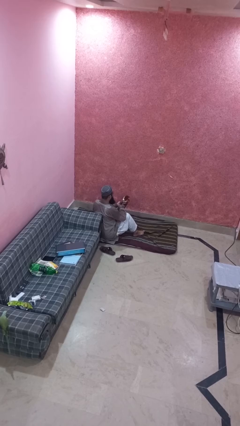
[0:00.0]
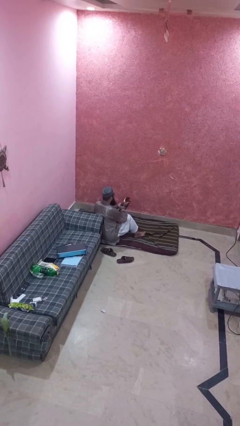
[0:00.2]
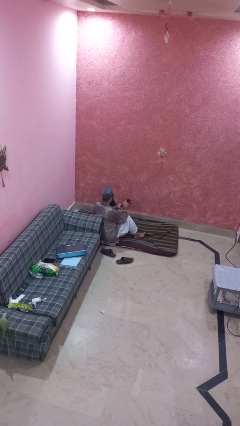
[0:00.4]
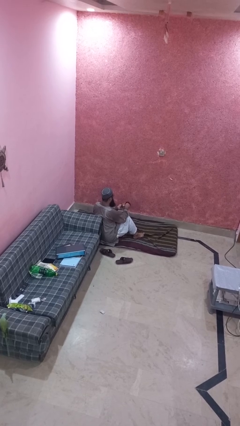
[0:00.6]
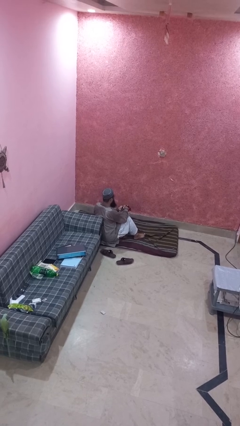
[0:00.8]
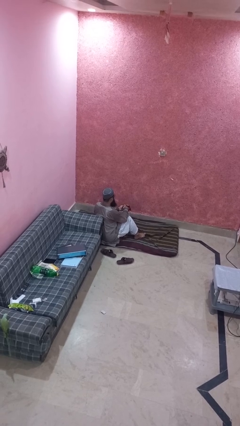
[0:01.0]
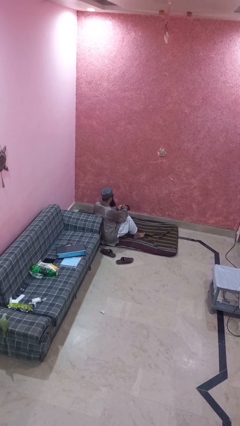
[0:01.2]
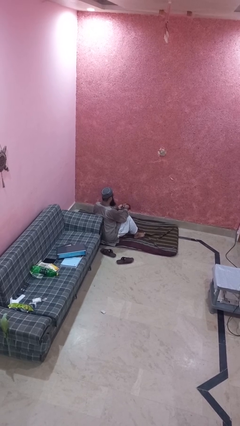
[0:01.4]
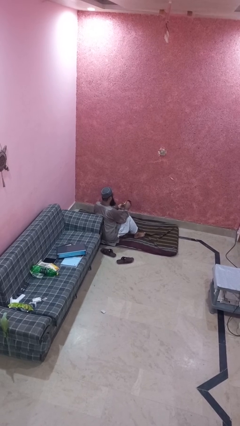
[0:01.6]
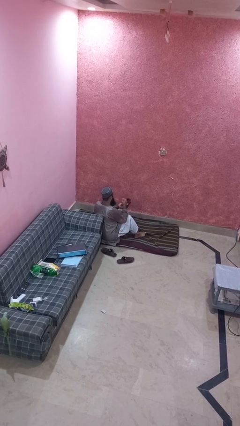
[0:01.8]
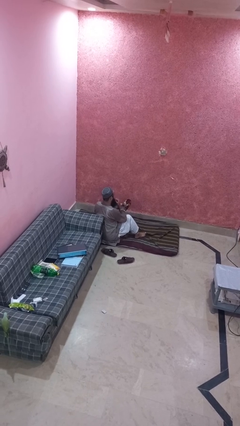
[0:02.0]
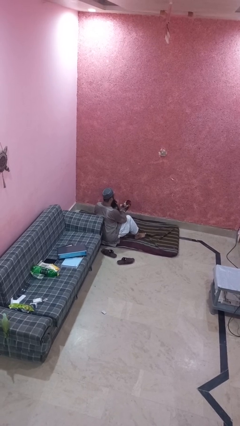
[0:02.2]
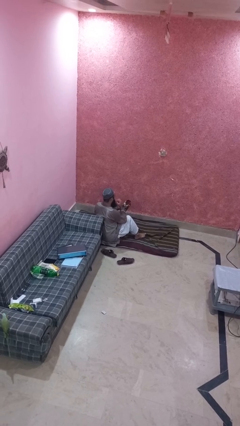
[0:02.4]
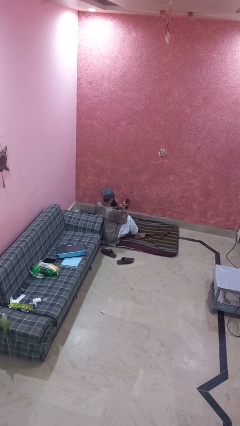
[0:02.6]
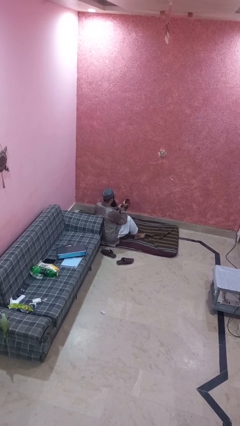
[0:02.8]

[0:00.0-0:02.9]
person eats snack from bag

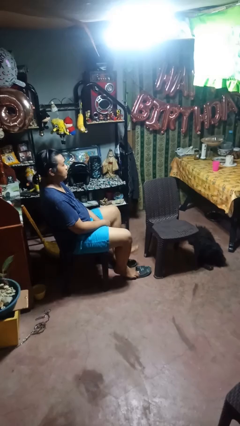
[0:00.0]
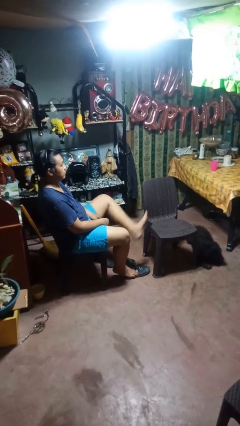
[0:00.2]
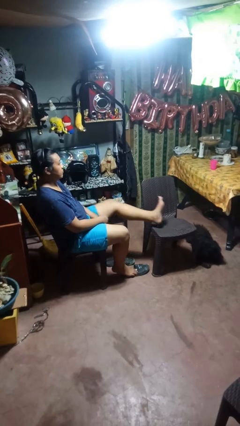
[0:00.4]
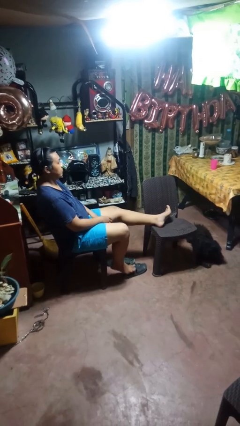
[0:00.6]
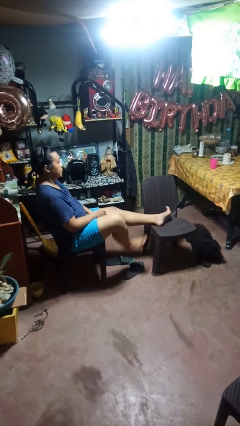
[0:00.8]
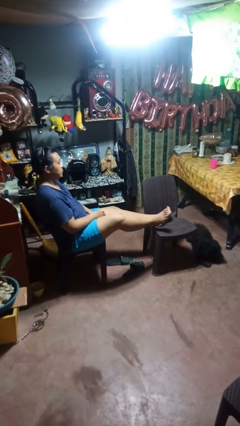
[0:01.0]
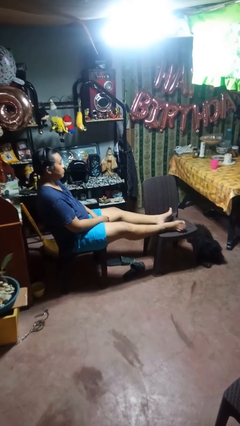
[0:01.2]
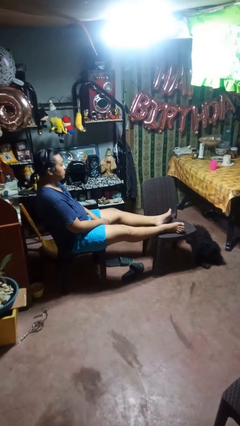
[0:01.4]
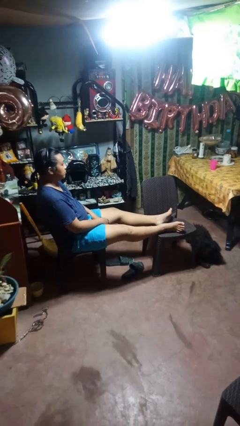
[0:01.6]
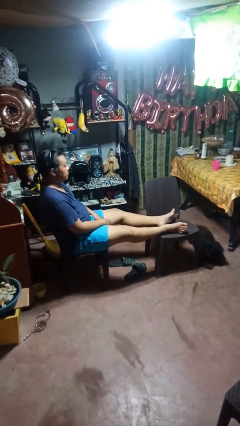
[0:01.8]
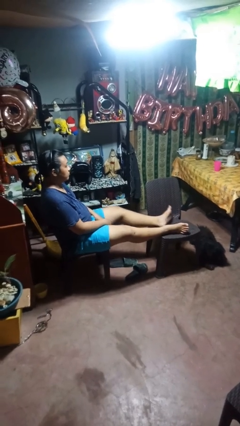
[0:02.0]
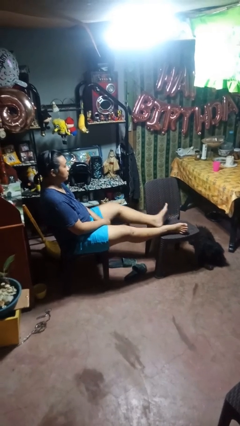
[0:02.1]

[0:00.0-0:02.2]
person puts feet up

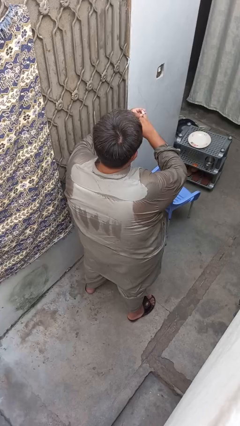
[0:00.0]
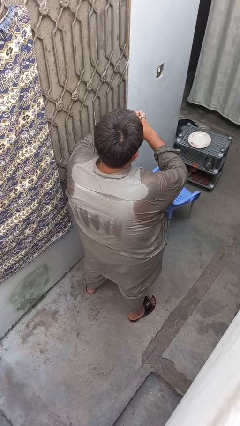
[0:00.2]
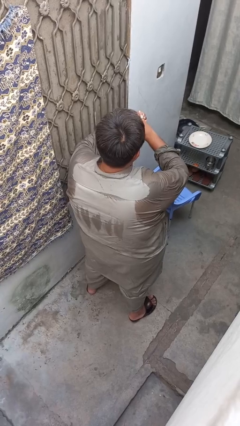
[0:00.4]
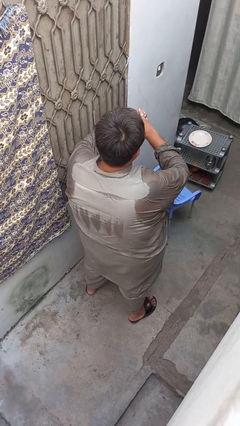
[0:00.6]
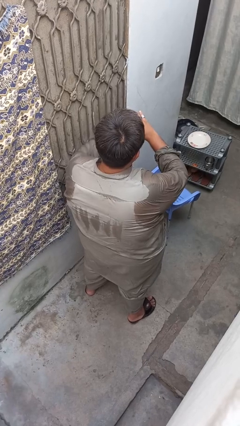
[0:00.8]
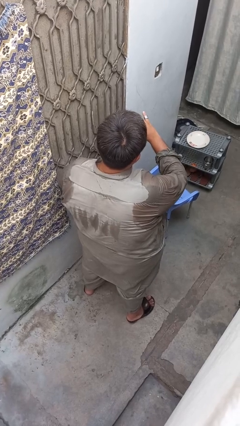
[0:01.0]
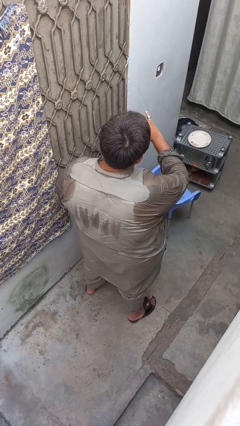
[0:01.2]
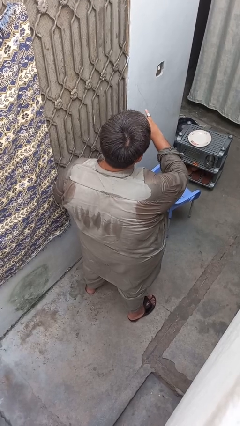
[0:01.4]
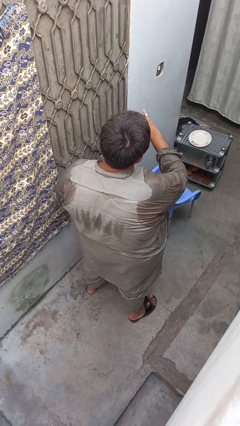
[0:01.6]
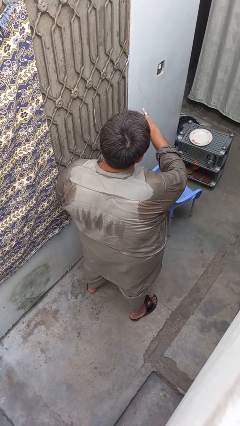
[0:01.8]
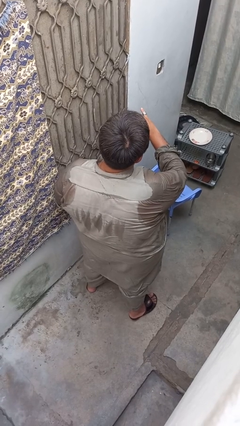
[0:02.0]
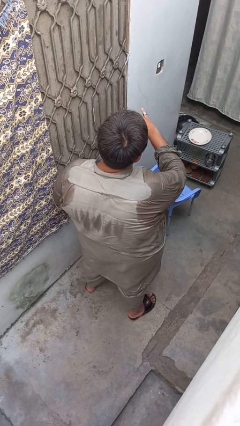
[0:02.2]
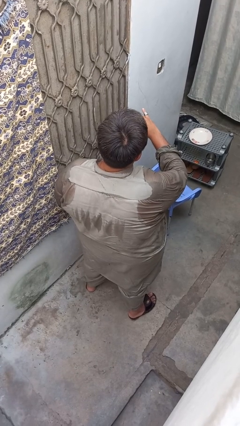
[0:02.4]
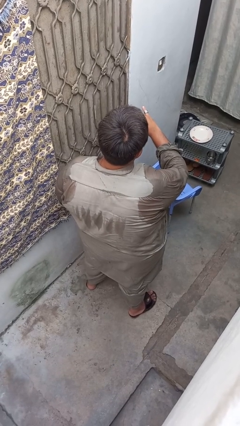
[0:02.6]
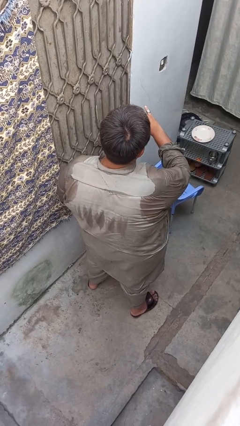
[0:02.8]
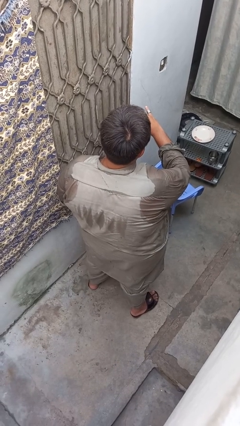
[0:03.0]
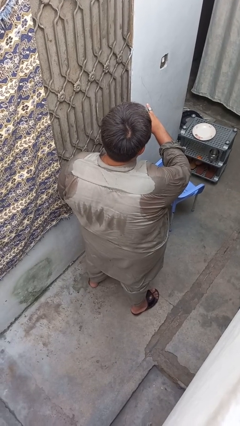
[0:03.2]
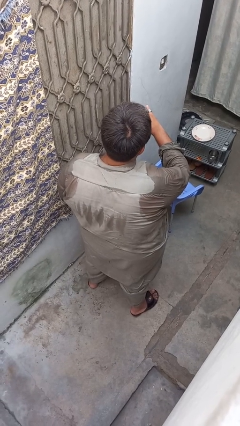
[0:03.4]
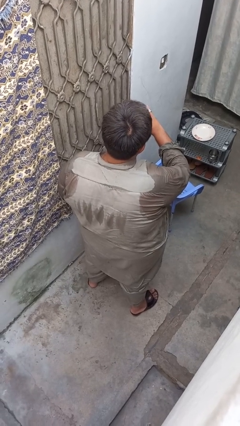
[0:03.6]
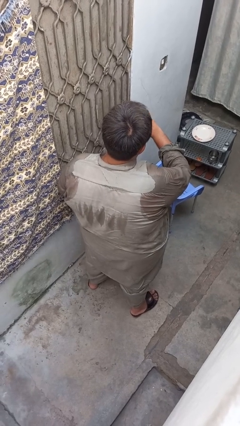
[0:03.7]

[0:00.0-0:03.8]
person puts on ring

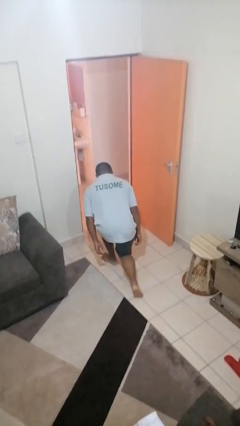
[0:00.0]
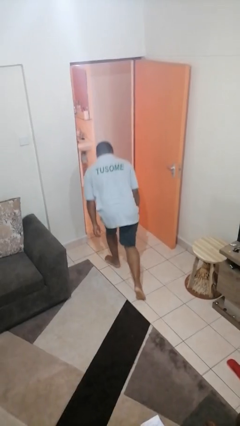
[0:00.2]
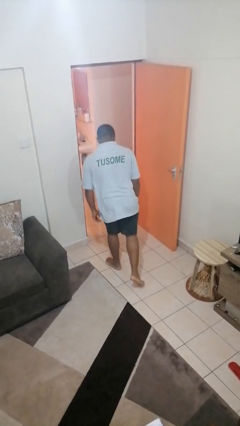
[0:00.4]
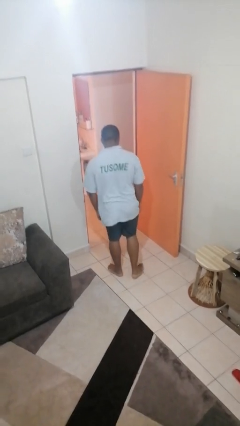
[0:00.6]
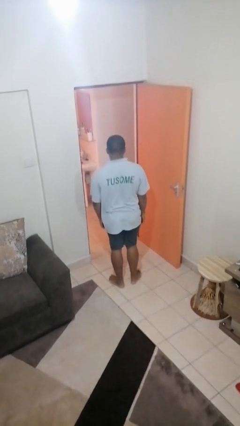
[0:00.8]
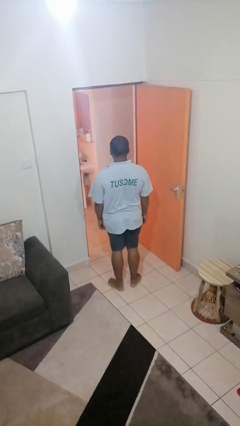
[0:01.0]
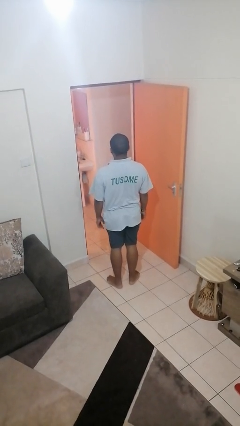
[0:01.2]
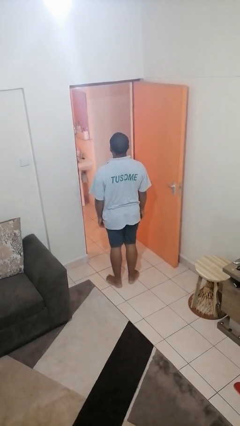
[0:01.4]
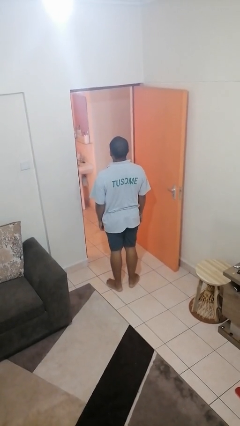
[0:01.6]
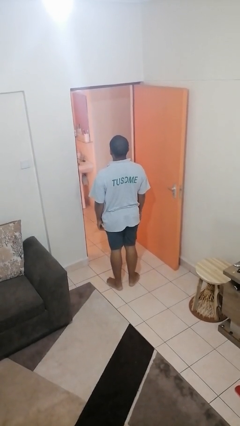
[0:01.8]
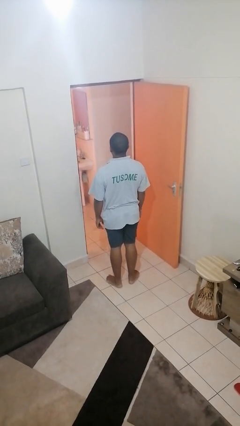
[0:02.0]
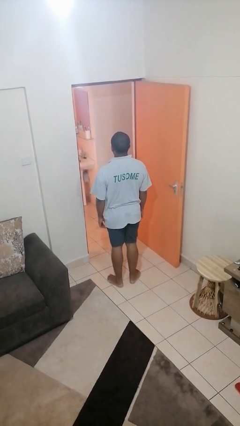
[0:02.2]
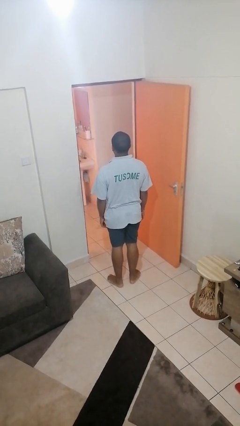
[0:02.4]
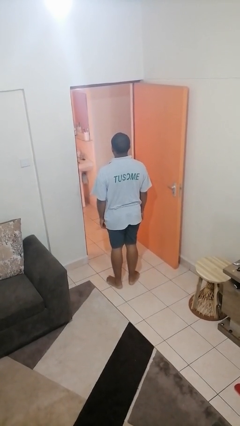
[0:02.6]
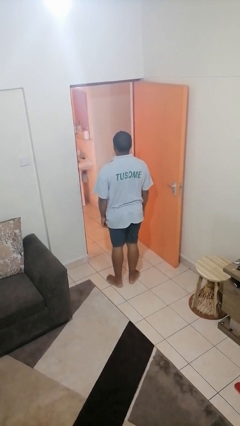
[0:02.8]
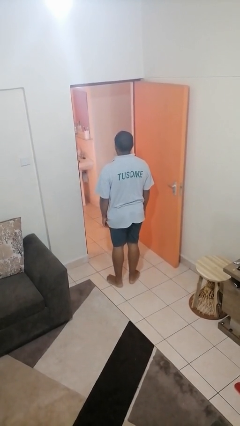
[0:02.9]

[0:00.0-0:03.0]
person stands up from floor

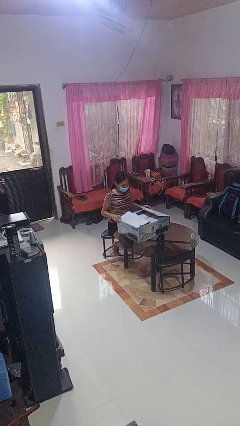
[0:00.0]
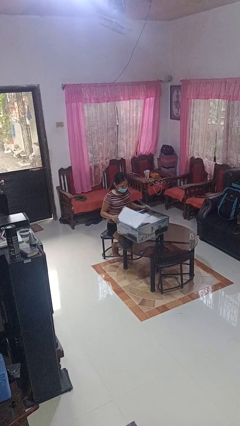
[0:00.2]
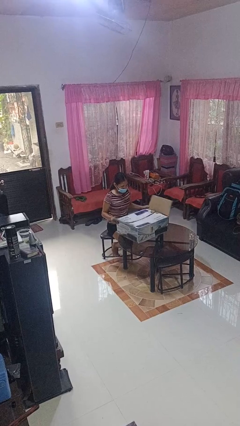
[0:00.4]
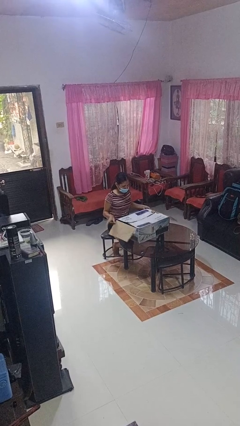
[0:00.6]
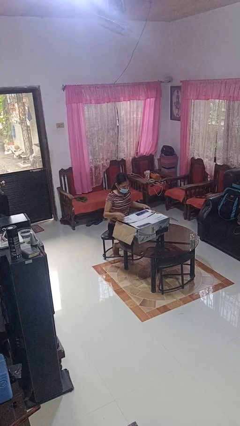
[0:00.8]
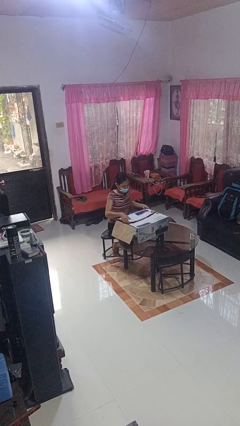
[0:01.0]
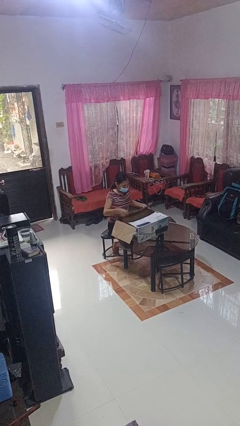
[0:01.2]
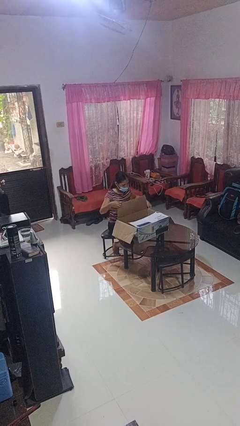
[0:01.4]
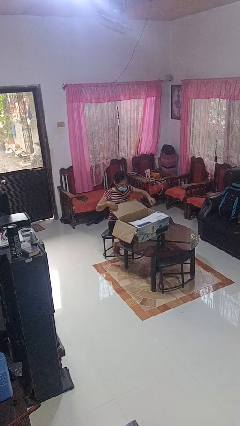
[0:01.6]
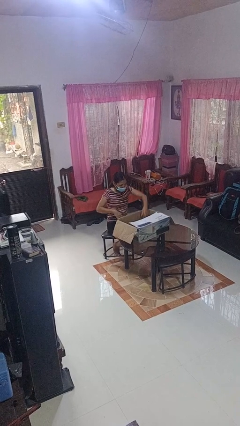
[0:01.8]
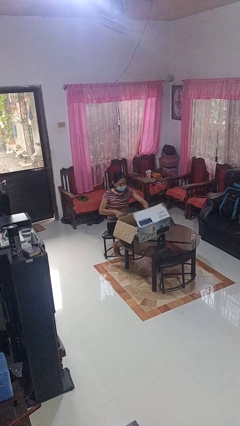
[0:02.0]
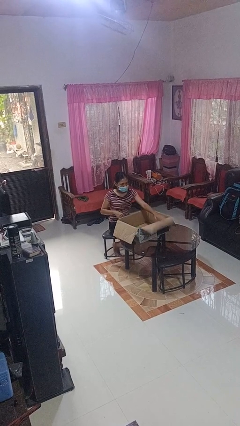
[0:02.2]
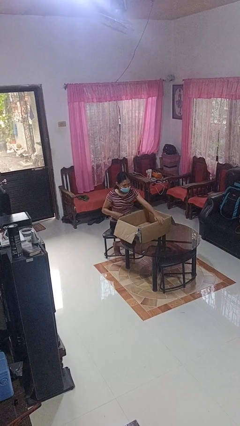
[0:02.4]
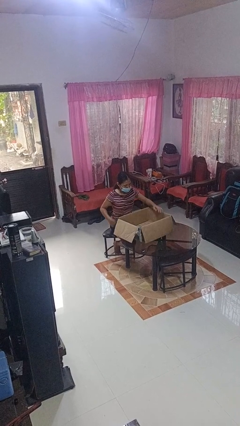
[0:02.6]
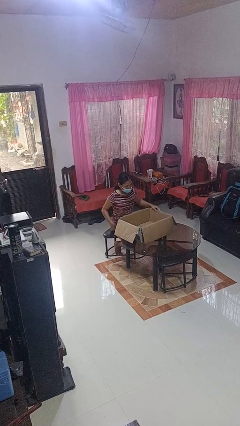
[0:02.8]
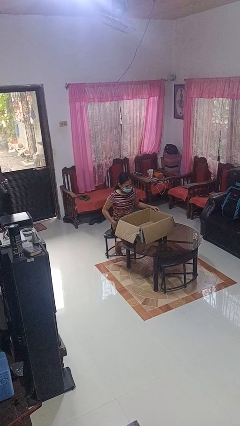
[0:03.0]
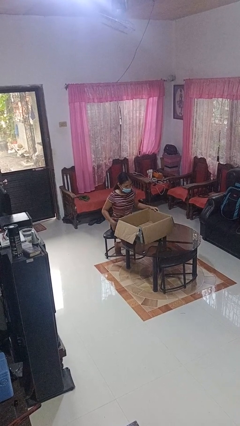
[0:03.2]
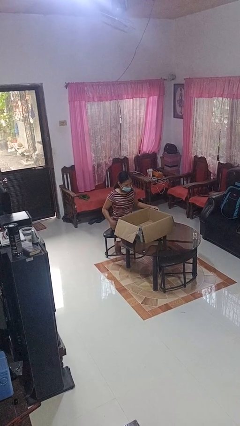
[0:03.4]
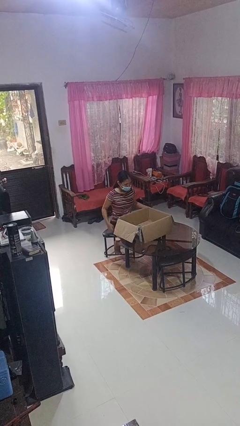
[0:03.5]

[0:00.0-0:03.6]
person opens box

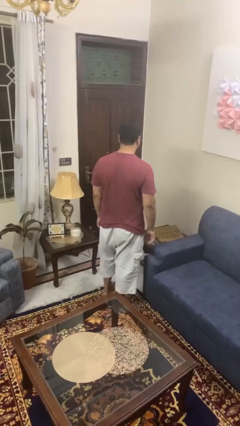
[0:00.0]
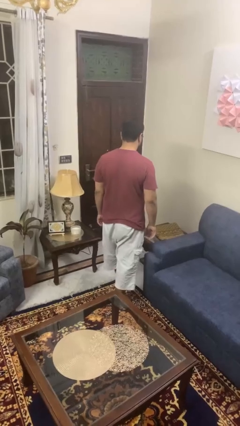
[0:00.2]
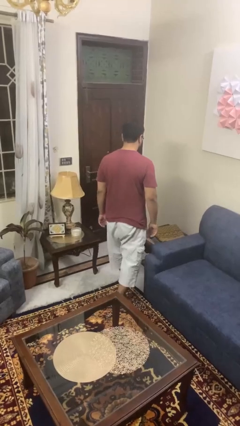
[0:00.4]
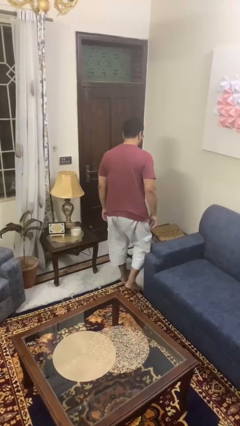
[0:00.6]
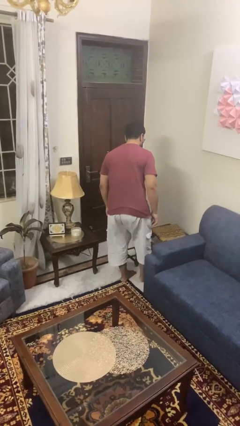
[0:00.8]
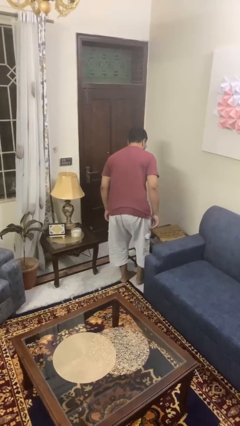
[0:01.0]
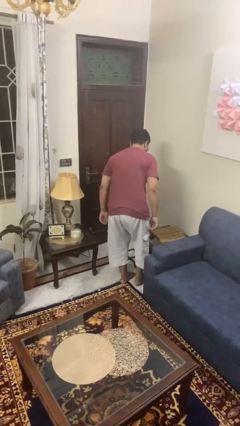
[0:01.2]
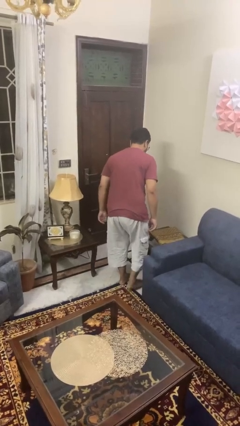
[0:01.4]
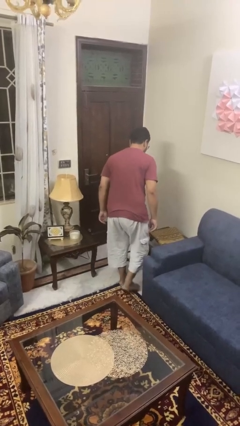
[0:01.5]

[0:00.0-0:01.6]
person bumps into table

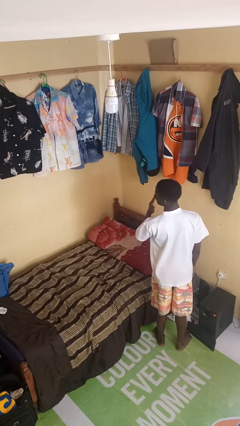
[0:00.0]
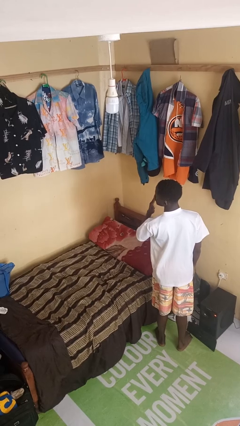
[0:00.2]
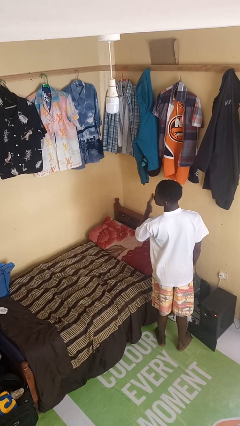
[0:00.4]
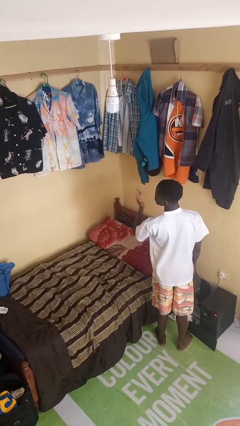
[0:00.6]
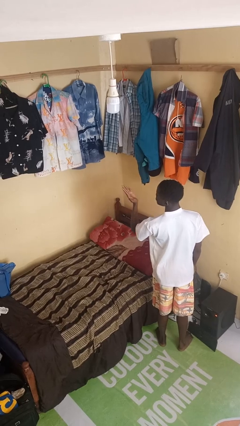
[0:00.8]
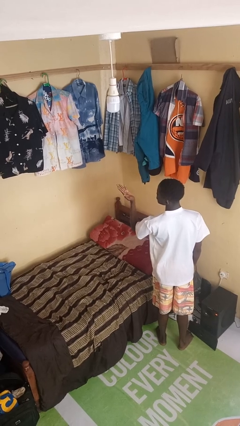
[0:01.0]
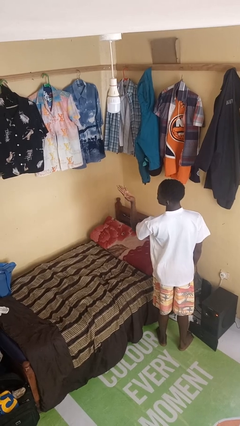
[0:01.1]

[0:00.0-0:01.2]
person gestures blow kiss
